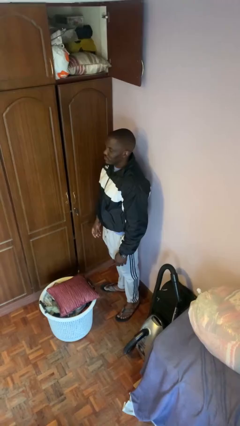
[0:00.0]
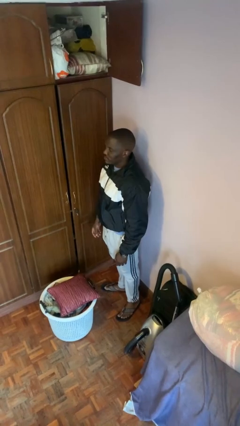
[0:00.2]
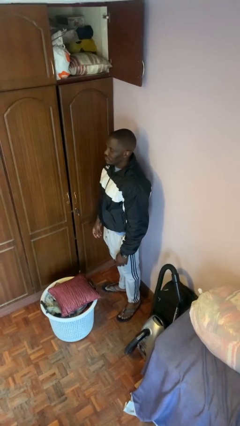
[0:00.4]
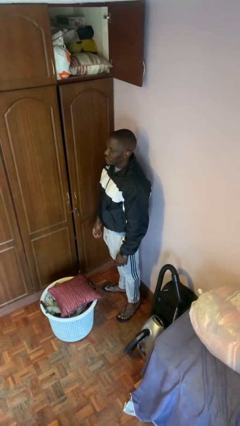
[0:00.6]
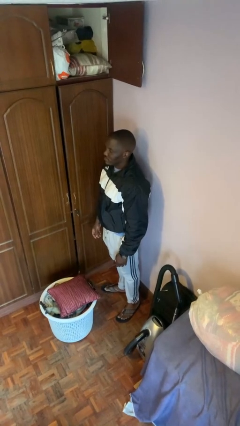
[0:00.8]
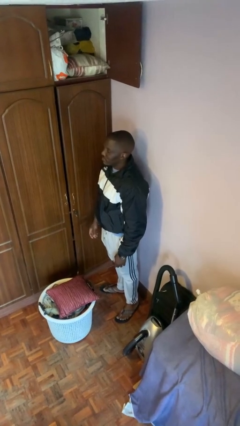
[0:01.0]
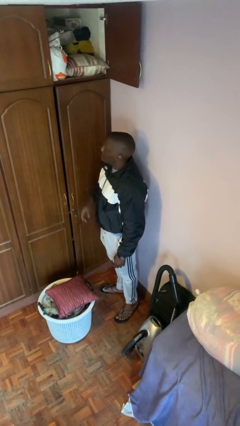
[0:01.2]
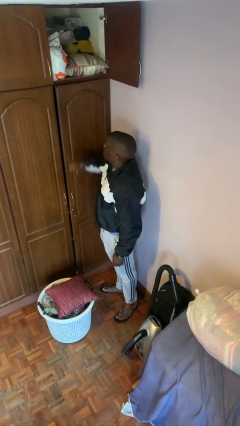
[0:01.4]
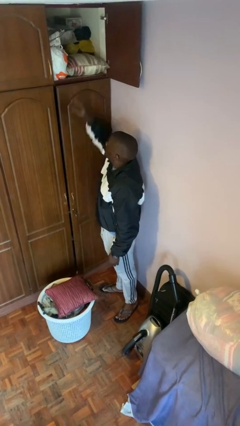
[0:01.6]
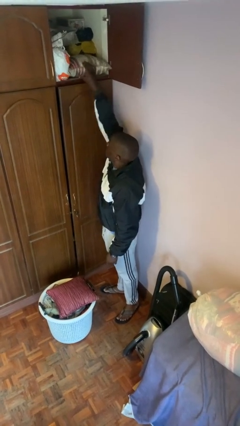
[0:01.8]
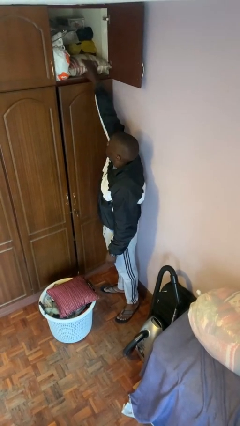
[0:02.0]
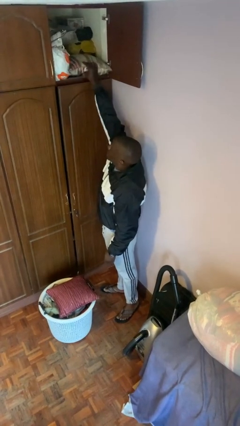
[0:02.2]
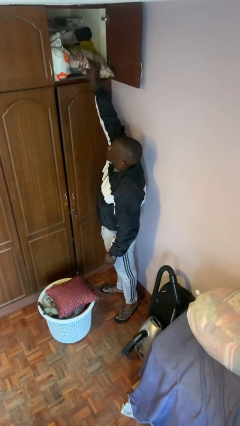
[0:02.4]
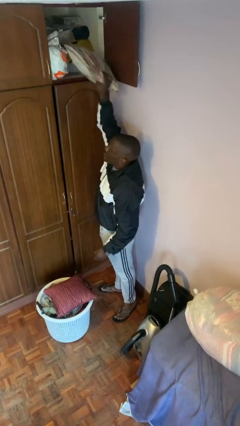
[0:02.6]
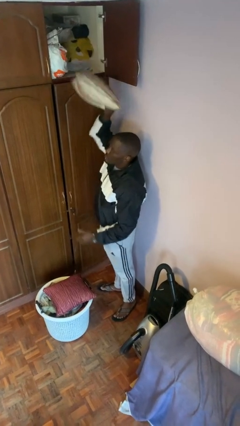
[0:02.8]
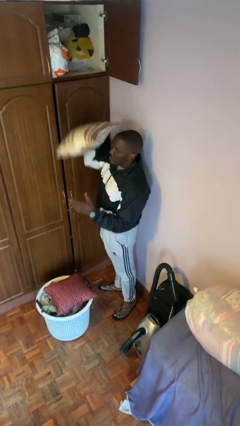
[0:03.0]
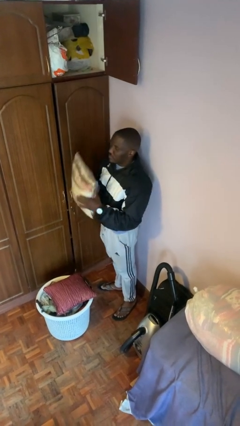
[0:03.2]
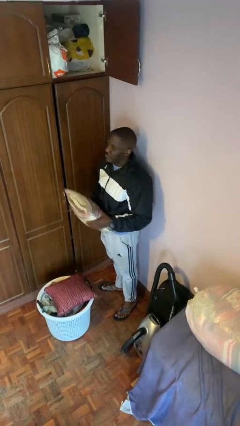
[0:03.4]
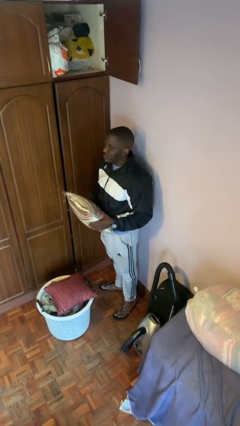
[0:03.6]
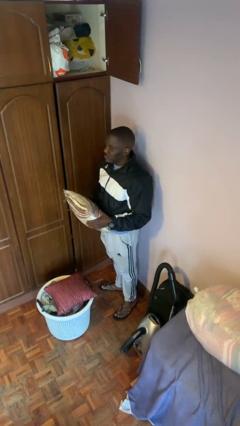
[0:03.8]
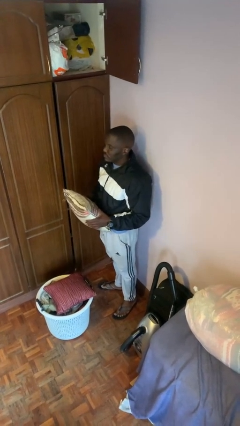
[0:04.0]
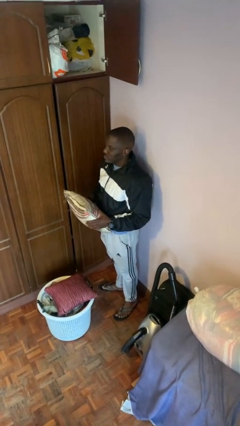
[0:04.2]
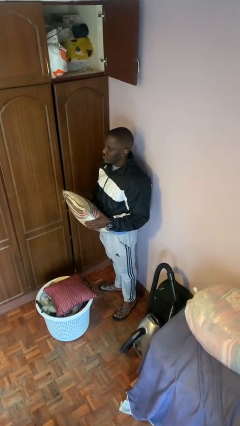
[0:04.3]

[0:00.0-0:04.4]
person picks up object from shelf

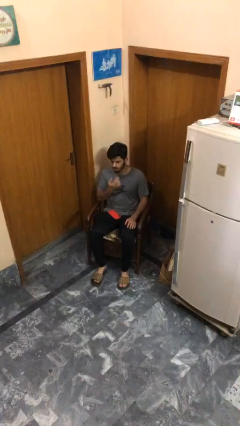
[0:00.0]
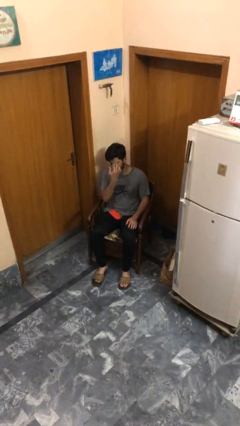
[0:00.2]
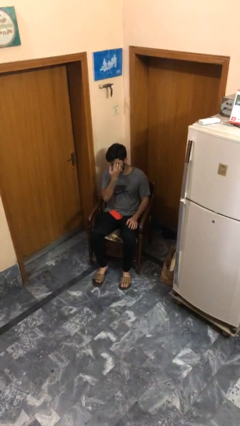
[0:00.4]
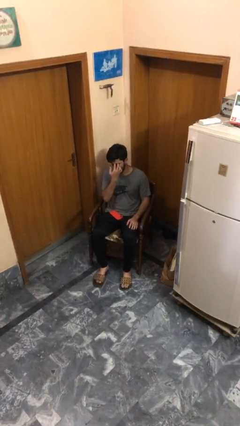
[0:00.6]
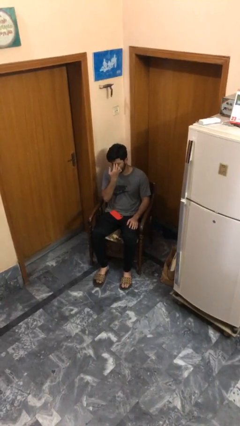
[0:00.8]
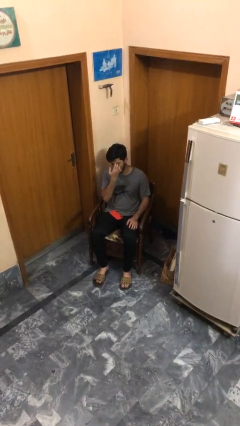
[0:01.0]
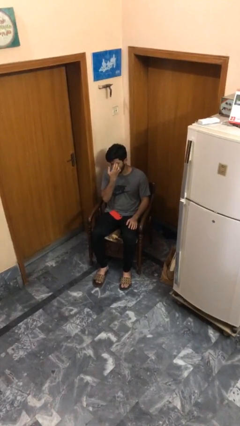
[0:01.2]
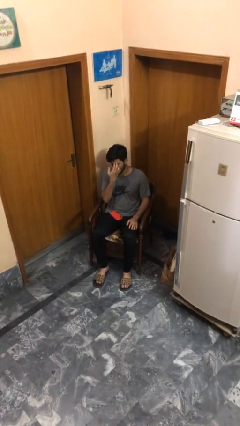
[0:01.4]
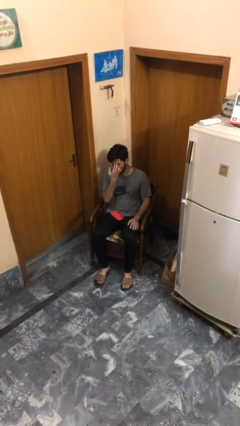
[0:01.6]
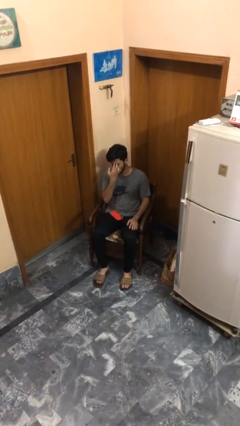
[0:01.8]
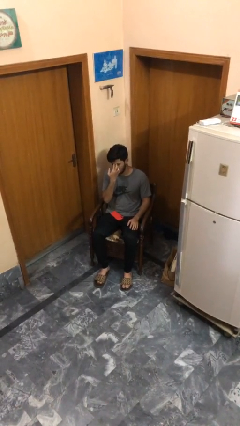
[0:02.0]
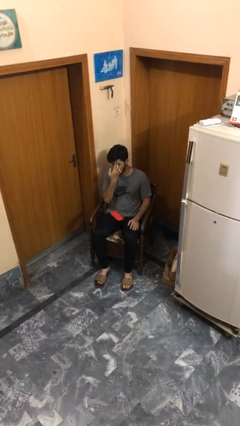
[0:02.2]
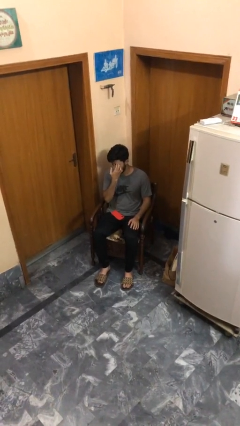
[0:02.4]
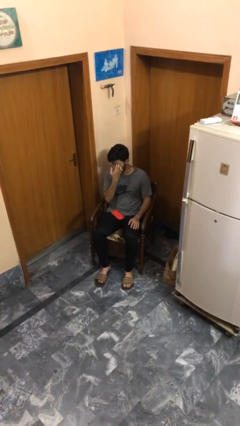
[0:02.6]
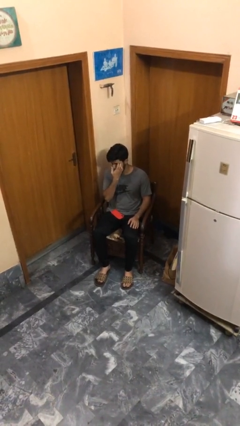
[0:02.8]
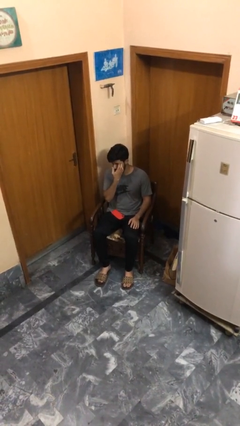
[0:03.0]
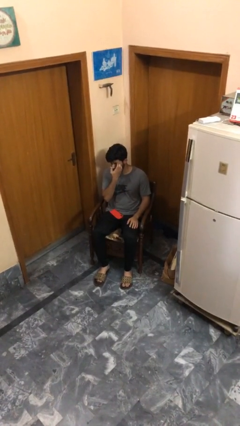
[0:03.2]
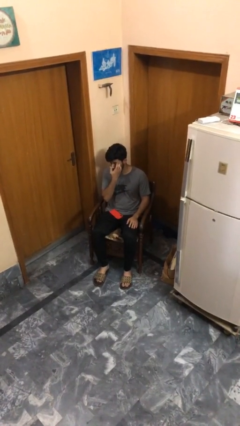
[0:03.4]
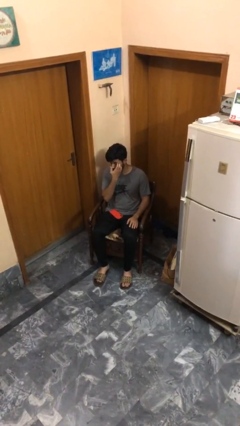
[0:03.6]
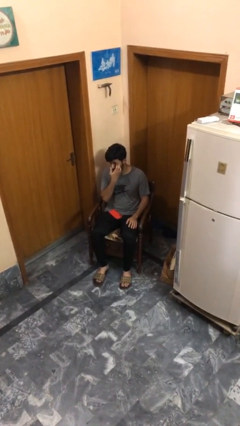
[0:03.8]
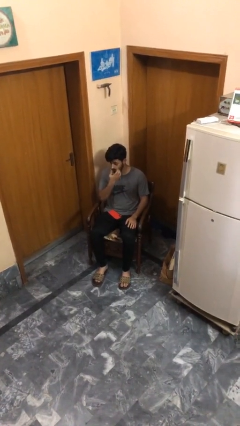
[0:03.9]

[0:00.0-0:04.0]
person scratches face

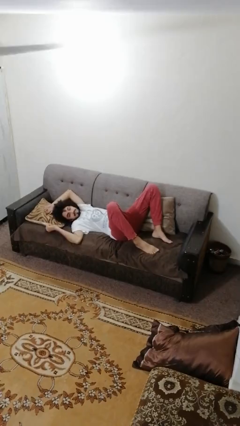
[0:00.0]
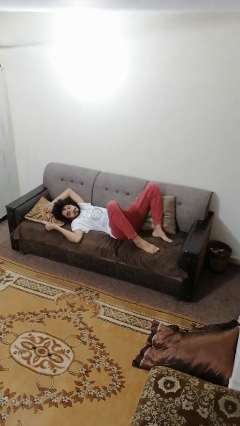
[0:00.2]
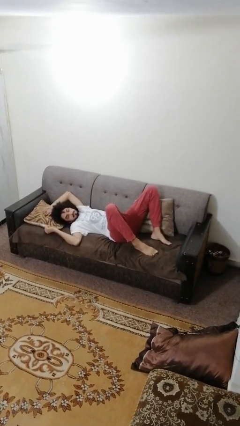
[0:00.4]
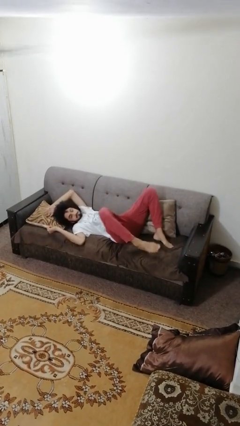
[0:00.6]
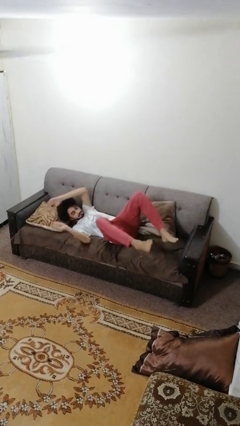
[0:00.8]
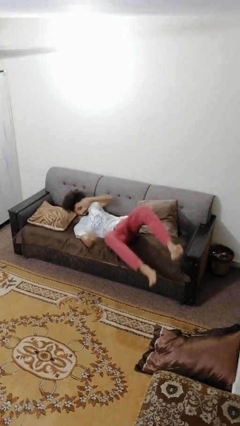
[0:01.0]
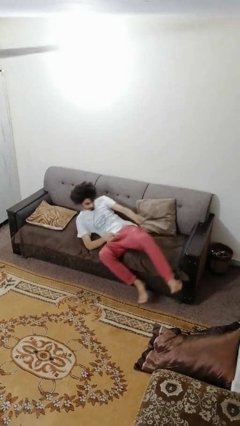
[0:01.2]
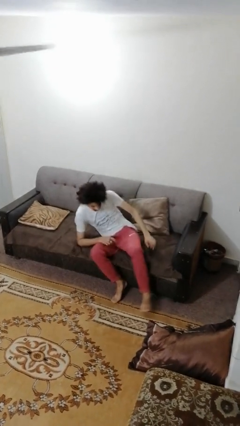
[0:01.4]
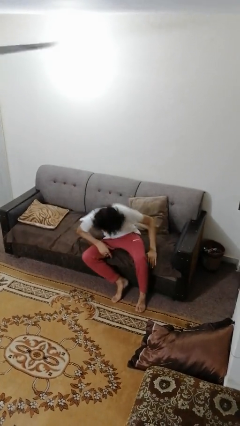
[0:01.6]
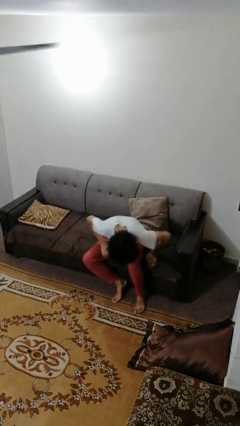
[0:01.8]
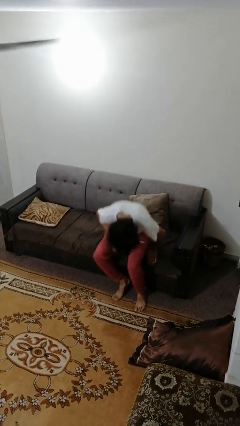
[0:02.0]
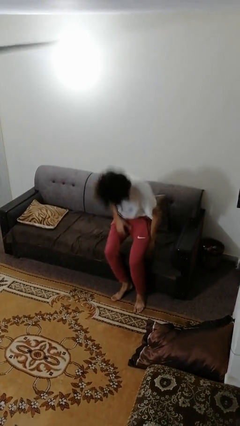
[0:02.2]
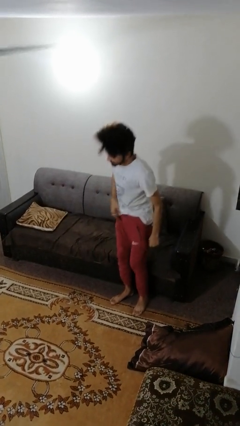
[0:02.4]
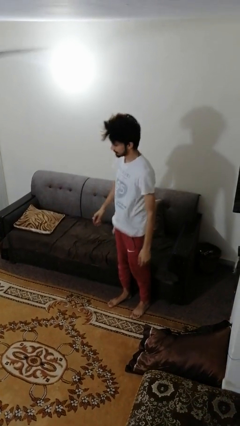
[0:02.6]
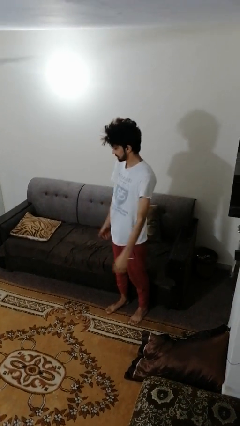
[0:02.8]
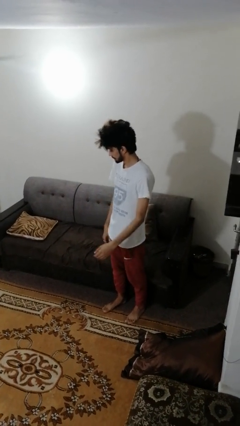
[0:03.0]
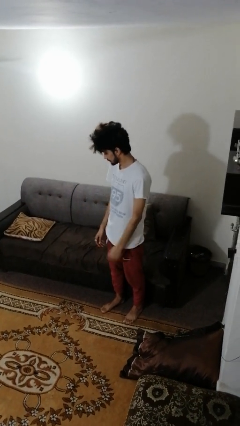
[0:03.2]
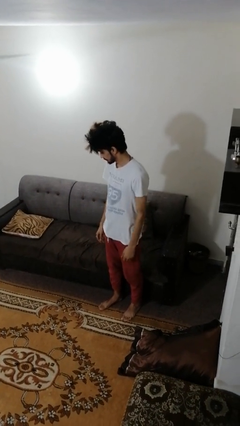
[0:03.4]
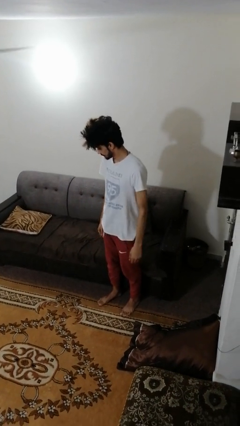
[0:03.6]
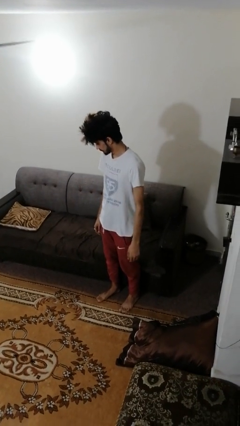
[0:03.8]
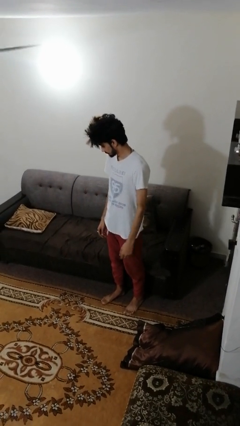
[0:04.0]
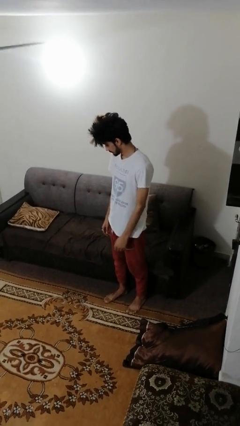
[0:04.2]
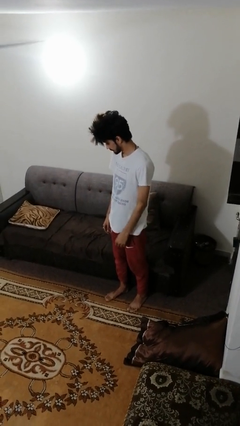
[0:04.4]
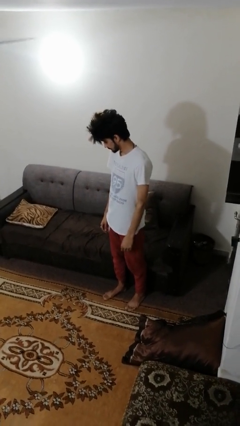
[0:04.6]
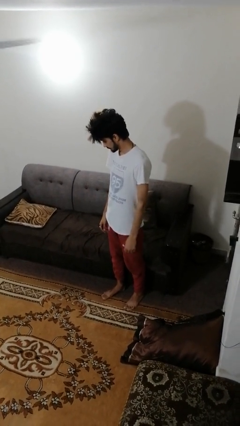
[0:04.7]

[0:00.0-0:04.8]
person stands up

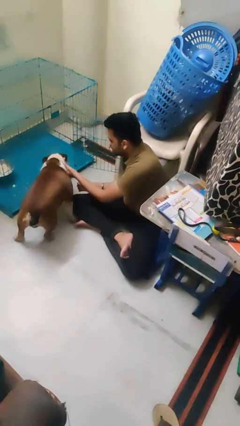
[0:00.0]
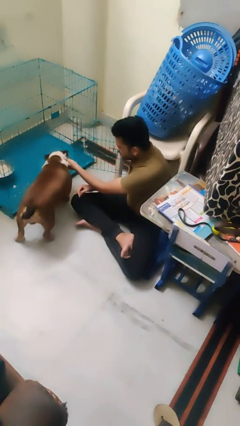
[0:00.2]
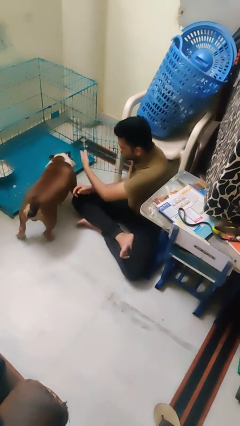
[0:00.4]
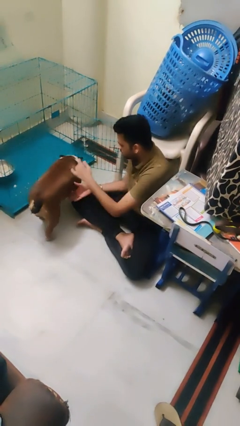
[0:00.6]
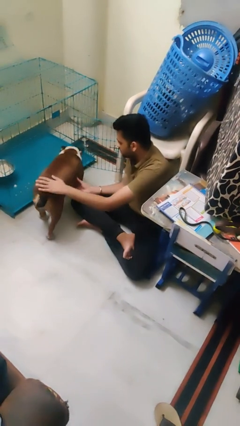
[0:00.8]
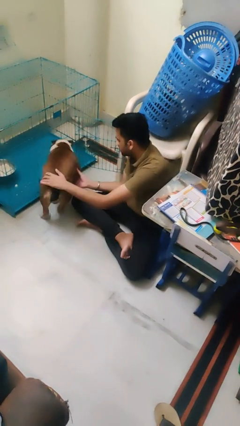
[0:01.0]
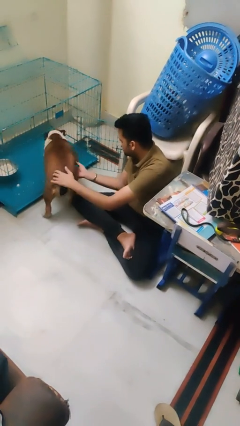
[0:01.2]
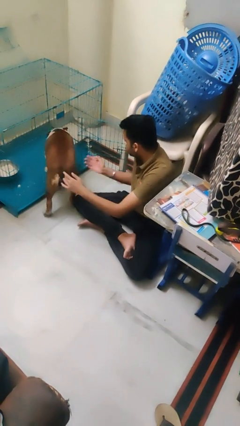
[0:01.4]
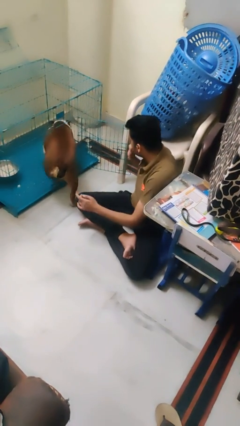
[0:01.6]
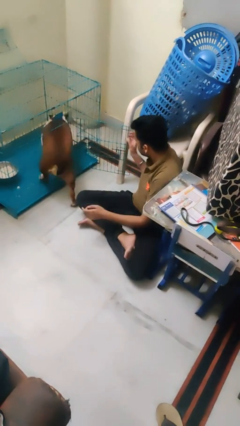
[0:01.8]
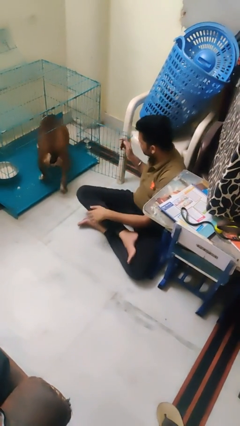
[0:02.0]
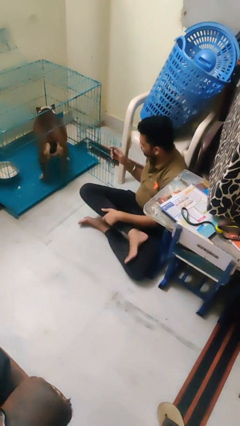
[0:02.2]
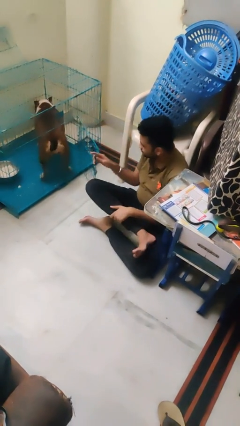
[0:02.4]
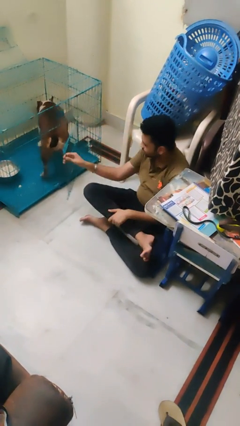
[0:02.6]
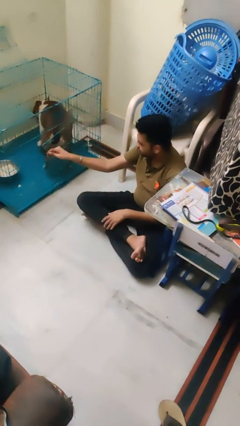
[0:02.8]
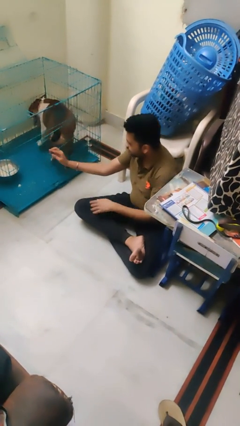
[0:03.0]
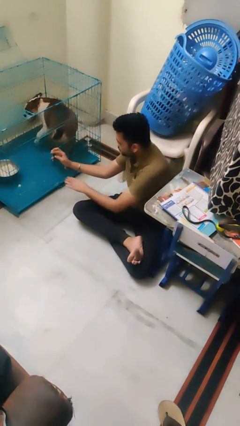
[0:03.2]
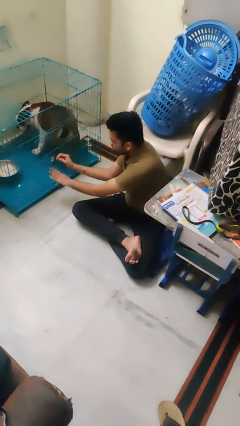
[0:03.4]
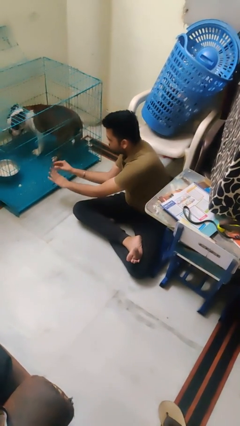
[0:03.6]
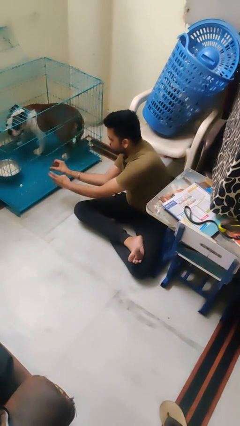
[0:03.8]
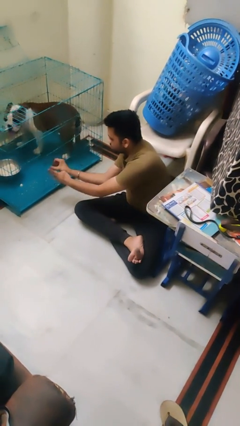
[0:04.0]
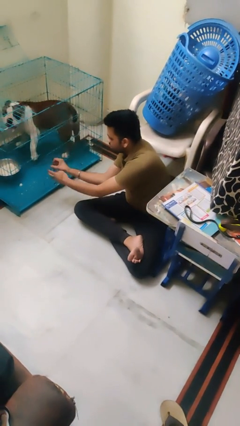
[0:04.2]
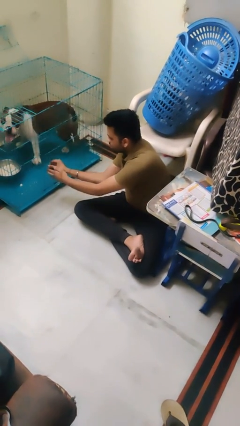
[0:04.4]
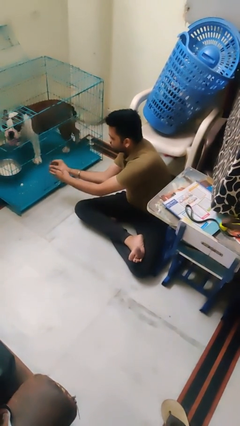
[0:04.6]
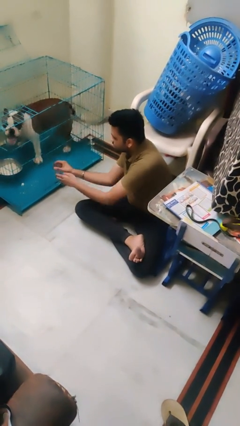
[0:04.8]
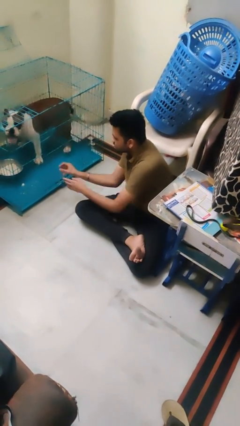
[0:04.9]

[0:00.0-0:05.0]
person crates dog
